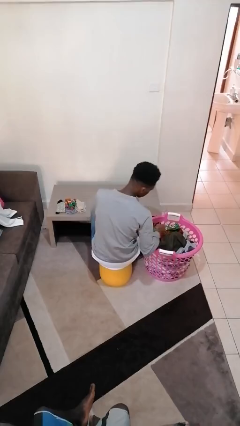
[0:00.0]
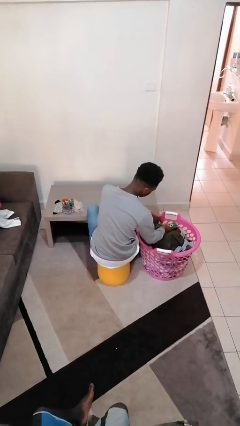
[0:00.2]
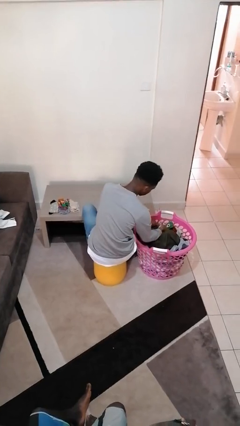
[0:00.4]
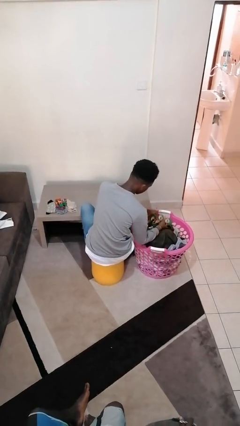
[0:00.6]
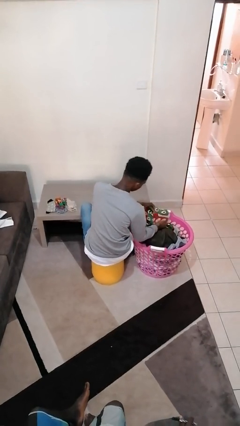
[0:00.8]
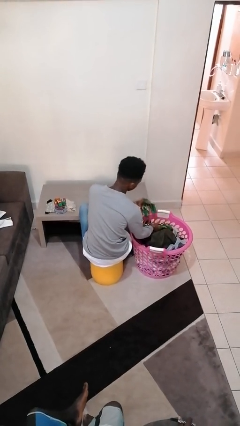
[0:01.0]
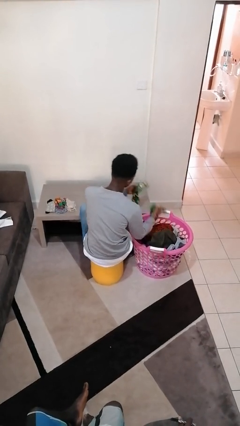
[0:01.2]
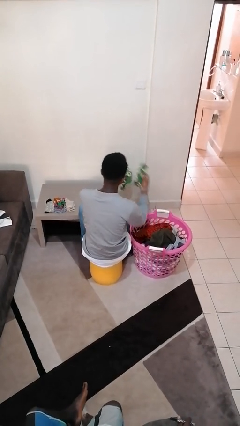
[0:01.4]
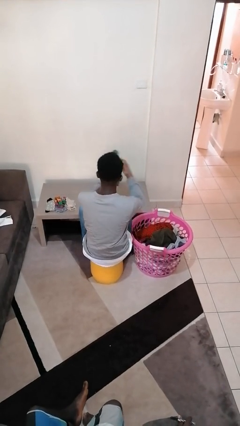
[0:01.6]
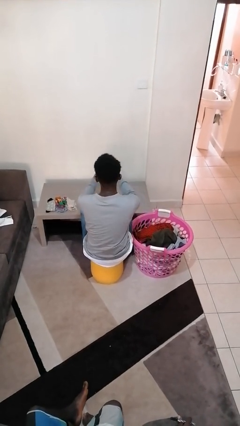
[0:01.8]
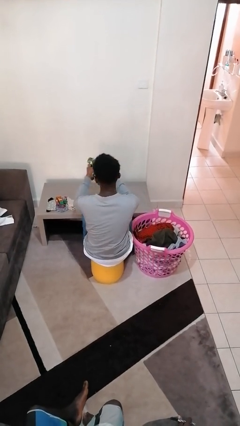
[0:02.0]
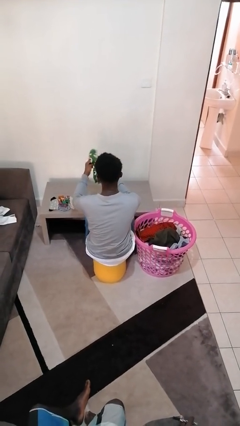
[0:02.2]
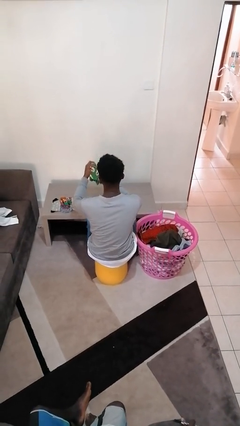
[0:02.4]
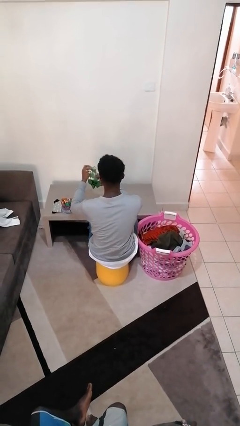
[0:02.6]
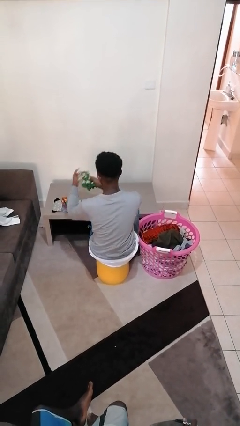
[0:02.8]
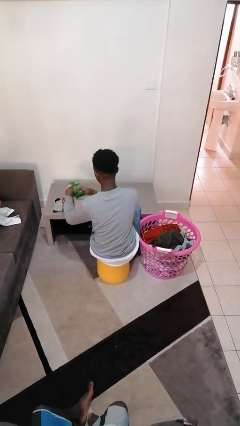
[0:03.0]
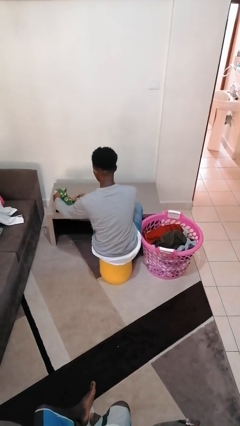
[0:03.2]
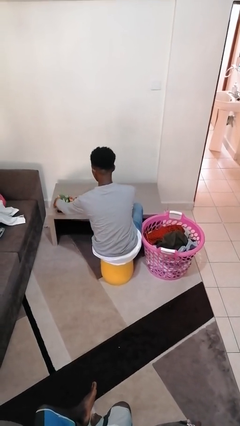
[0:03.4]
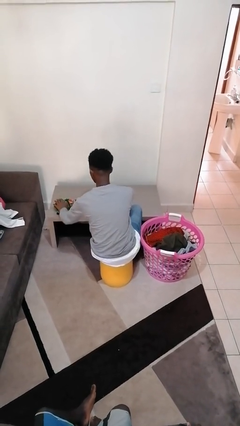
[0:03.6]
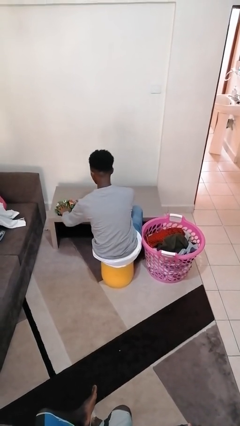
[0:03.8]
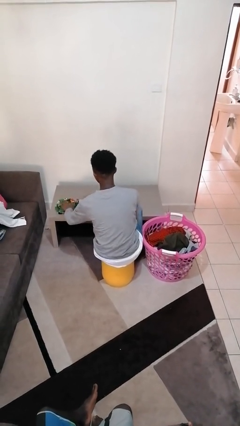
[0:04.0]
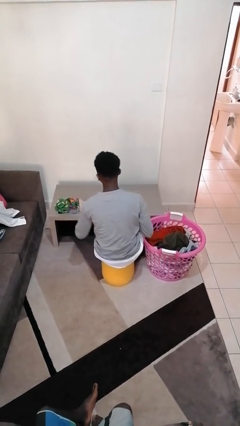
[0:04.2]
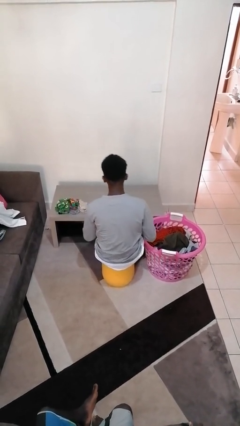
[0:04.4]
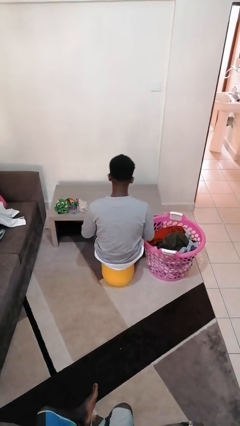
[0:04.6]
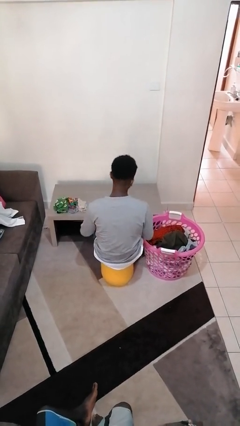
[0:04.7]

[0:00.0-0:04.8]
person folds socks

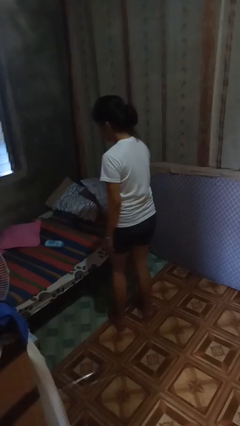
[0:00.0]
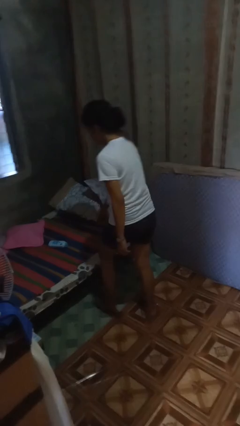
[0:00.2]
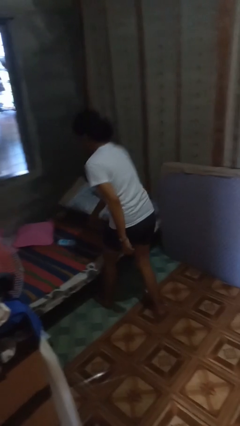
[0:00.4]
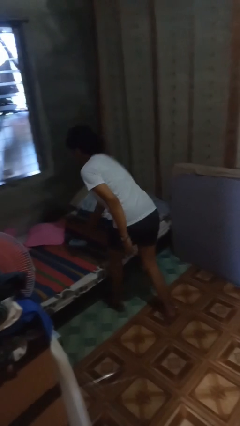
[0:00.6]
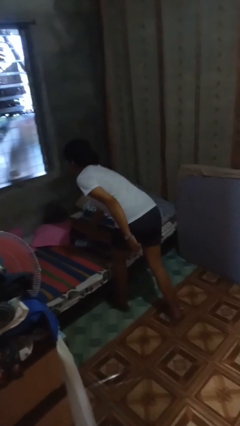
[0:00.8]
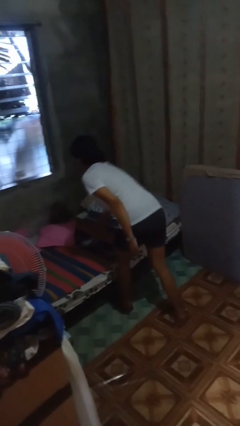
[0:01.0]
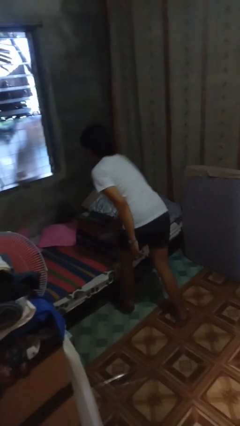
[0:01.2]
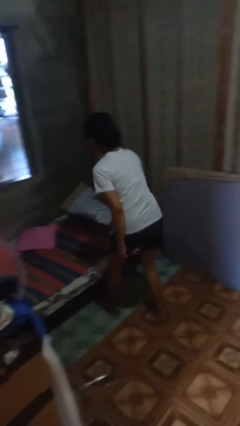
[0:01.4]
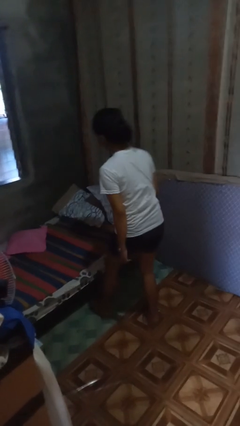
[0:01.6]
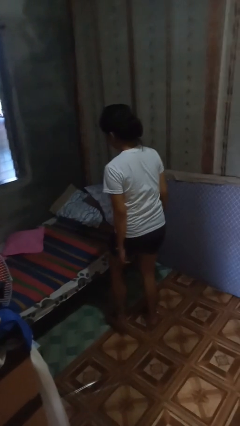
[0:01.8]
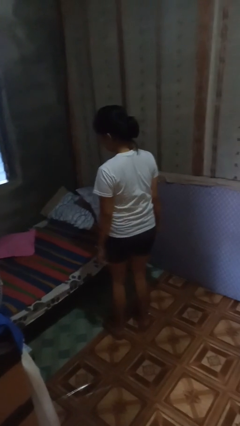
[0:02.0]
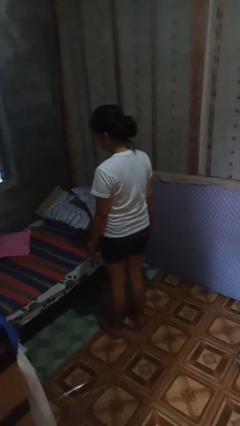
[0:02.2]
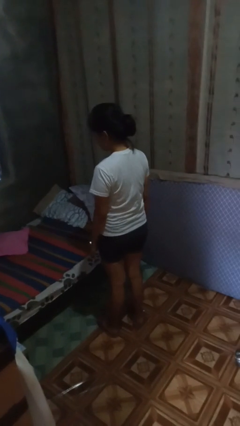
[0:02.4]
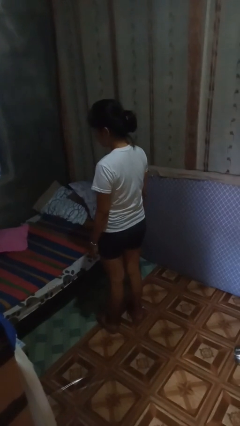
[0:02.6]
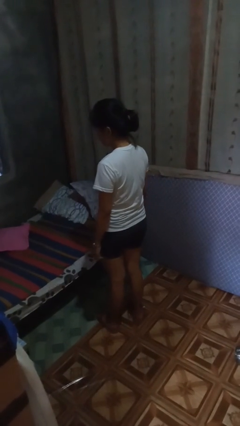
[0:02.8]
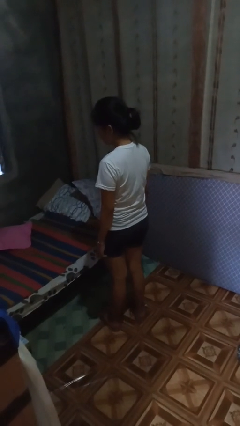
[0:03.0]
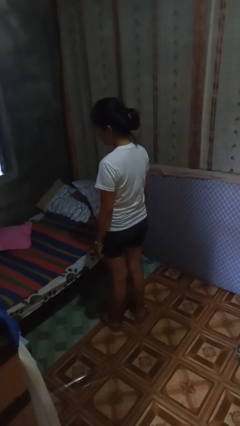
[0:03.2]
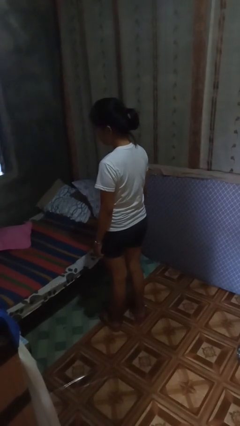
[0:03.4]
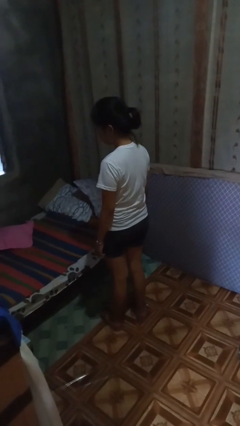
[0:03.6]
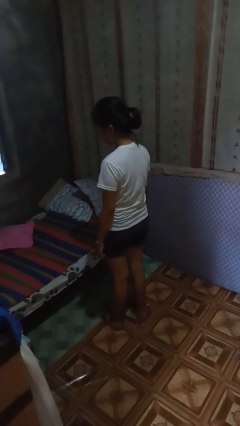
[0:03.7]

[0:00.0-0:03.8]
person picks up object from bed

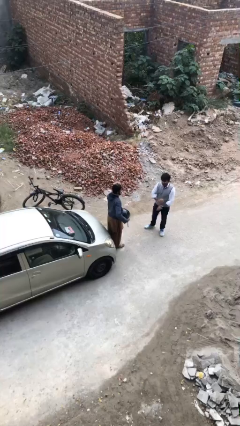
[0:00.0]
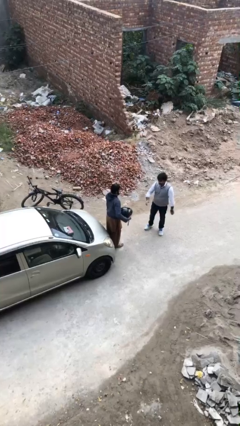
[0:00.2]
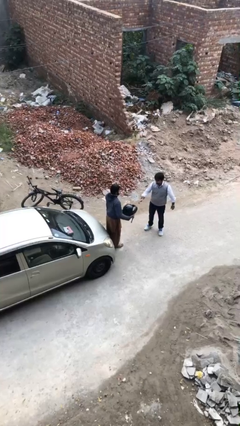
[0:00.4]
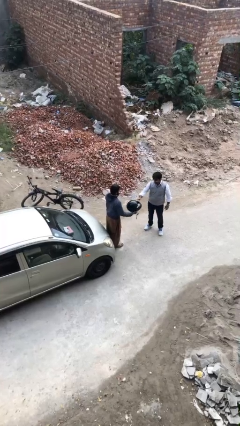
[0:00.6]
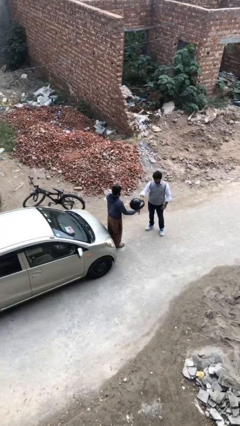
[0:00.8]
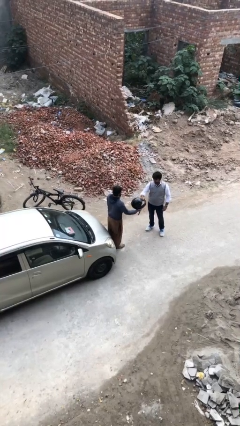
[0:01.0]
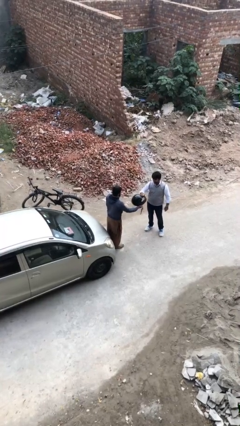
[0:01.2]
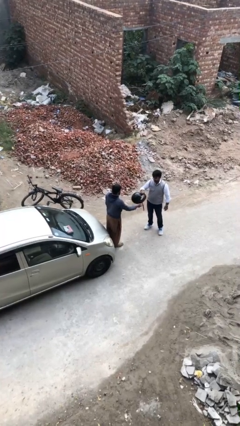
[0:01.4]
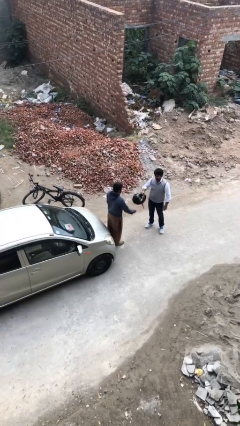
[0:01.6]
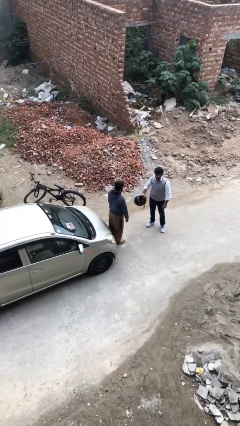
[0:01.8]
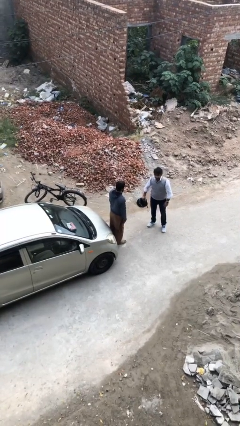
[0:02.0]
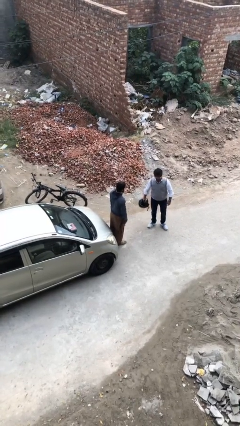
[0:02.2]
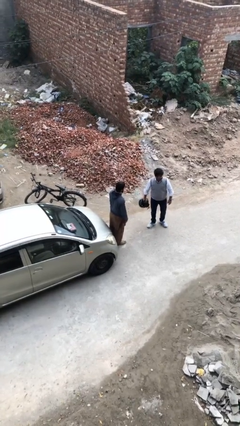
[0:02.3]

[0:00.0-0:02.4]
person transfers object to person

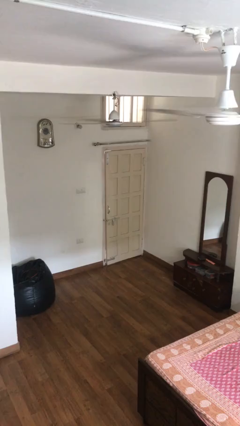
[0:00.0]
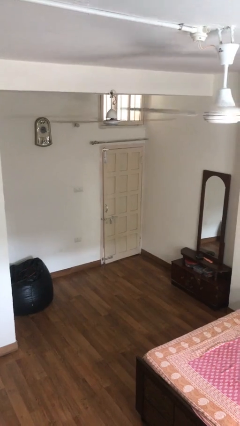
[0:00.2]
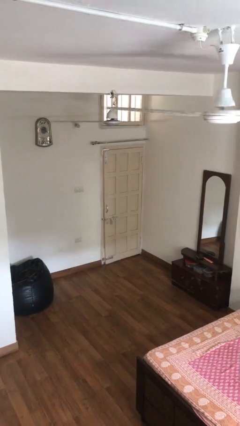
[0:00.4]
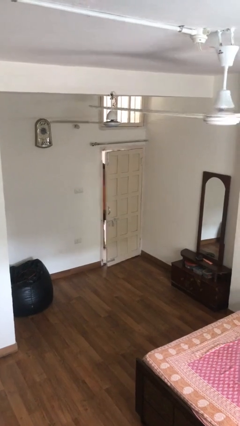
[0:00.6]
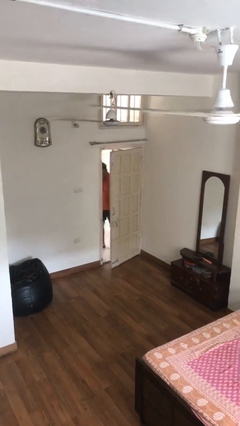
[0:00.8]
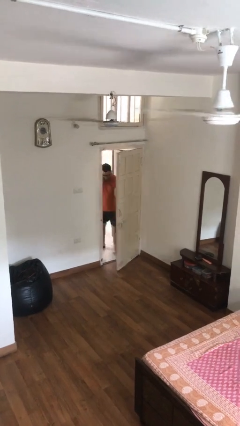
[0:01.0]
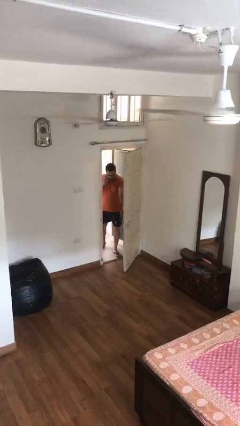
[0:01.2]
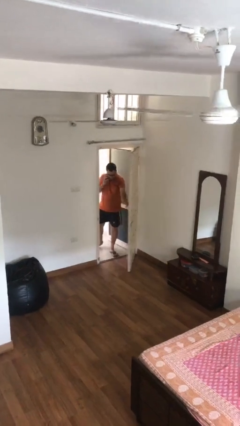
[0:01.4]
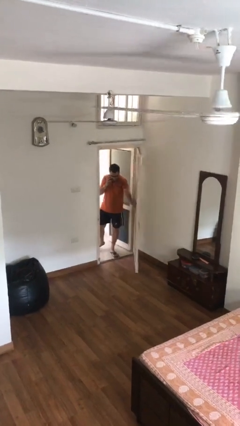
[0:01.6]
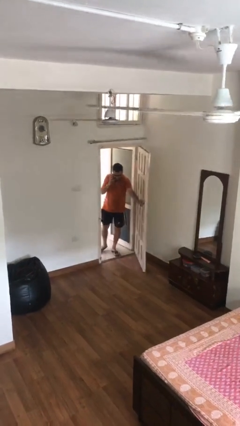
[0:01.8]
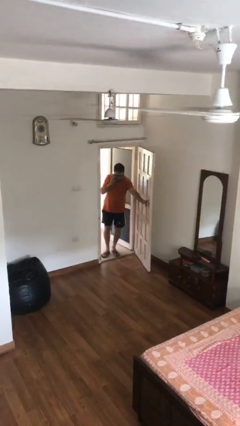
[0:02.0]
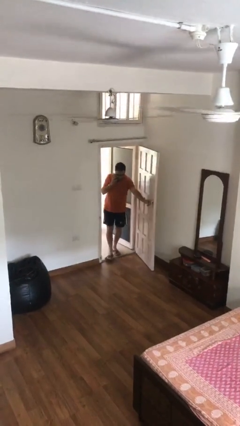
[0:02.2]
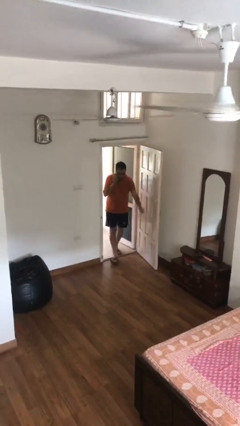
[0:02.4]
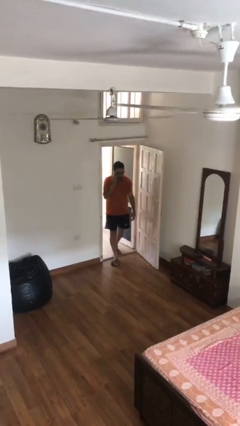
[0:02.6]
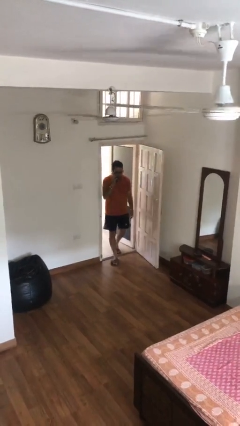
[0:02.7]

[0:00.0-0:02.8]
person opens facility door

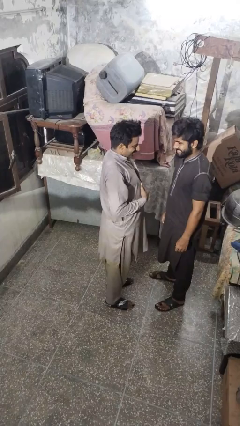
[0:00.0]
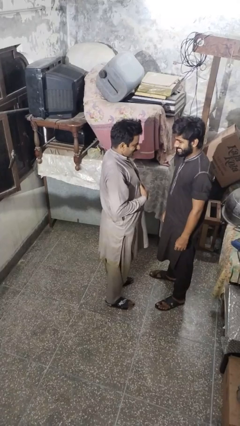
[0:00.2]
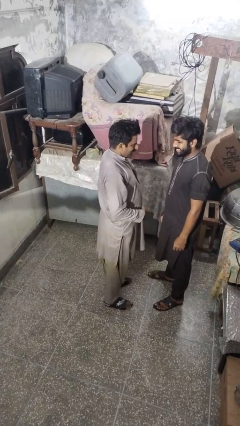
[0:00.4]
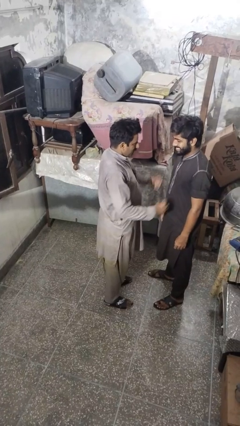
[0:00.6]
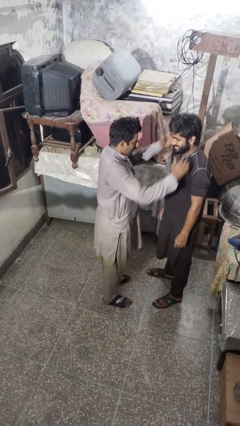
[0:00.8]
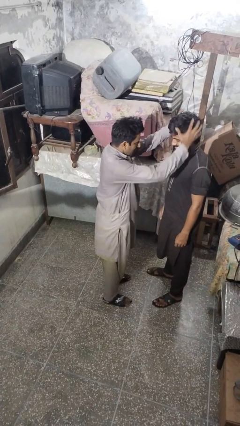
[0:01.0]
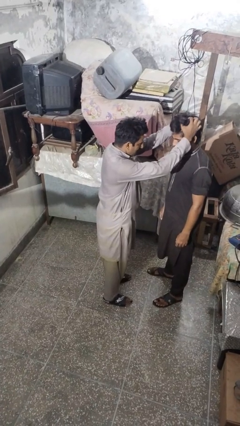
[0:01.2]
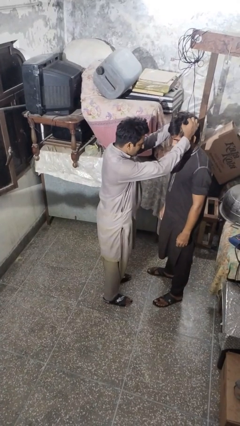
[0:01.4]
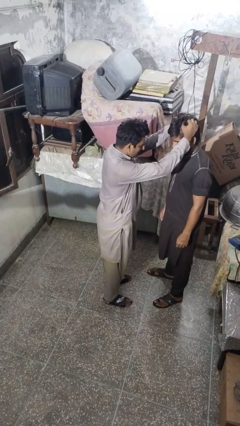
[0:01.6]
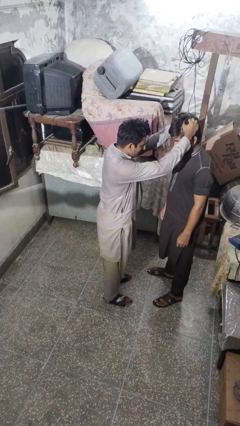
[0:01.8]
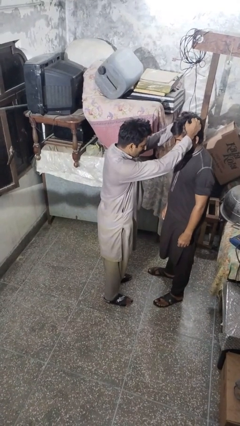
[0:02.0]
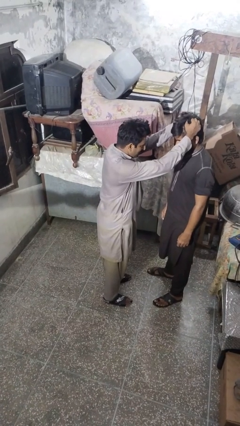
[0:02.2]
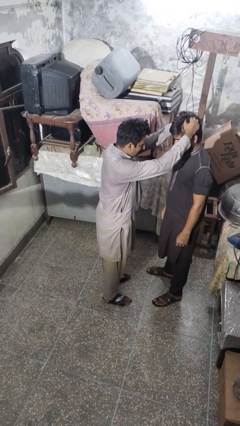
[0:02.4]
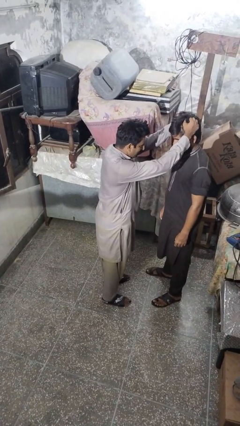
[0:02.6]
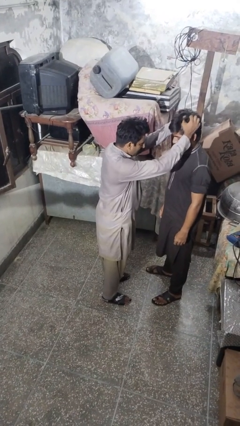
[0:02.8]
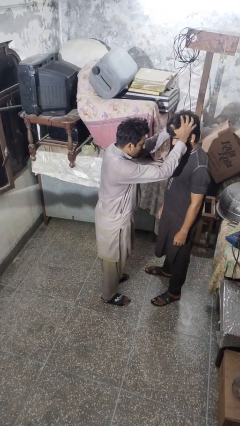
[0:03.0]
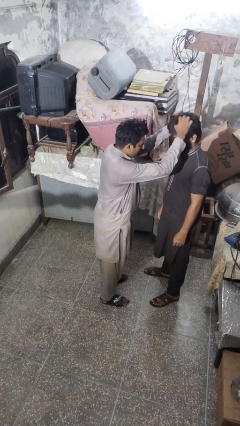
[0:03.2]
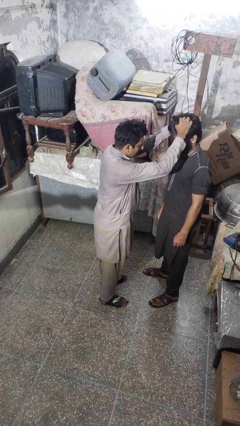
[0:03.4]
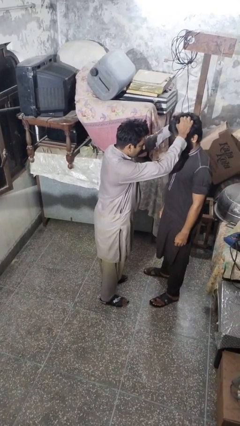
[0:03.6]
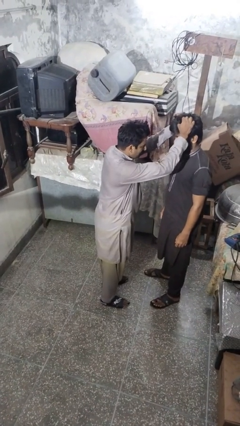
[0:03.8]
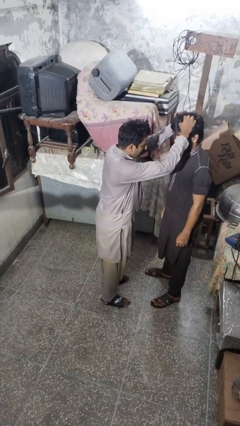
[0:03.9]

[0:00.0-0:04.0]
person grabs person by hair
